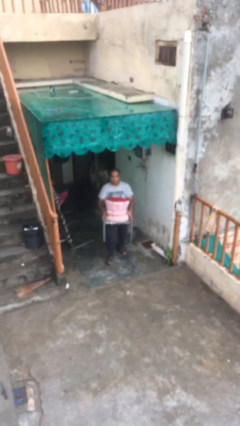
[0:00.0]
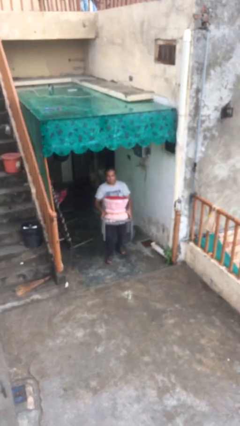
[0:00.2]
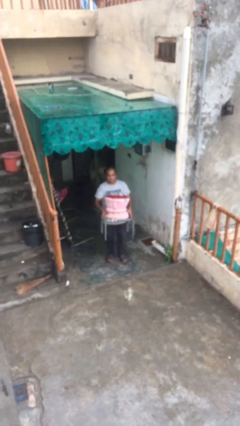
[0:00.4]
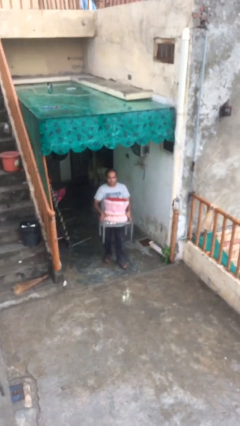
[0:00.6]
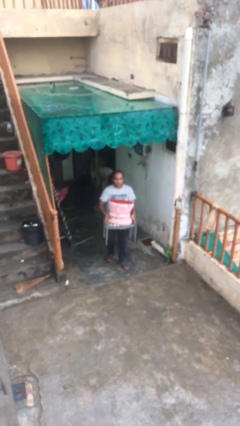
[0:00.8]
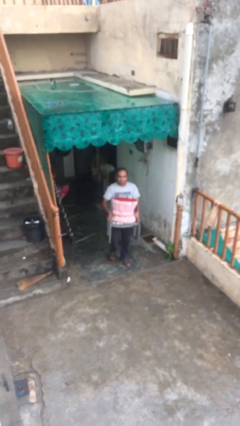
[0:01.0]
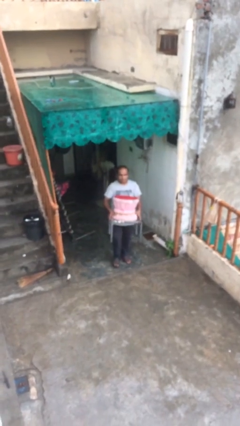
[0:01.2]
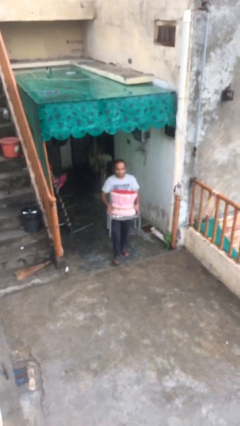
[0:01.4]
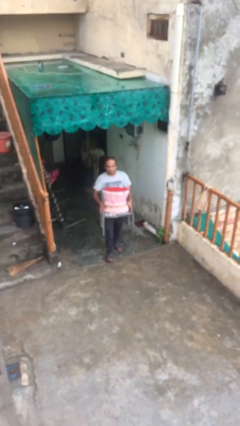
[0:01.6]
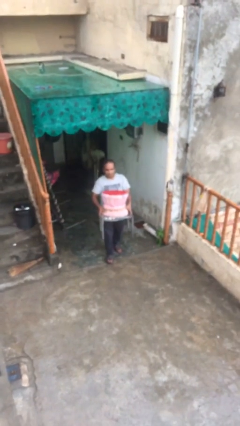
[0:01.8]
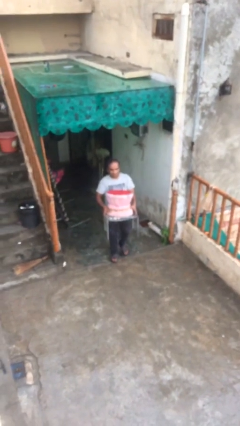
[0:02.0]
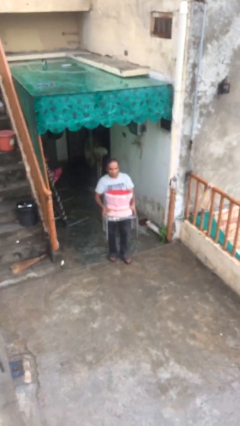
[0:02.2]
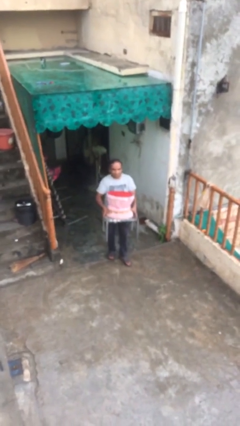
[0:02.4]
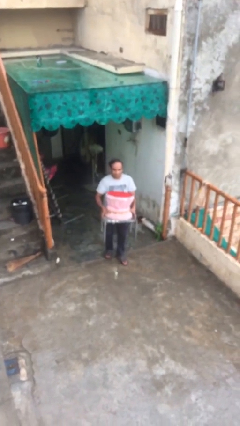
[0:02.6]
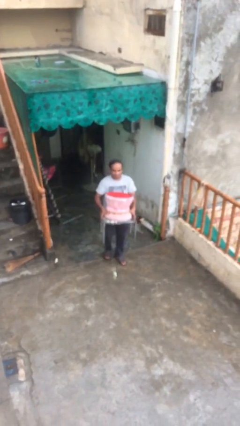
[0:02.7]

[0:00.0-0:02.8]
person carries heavy object

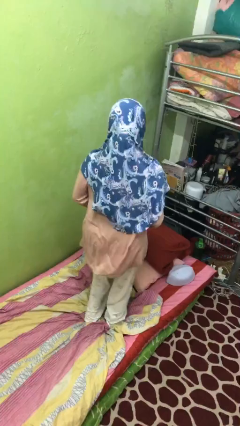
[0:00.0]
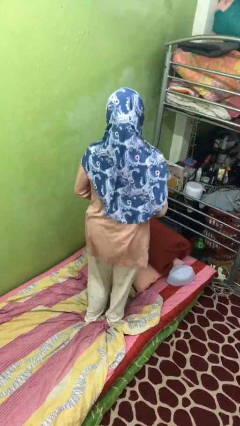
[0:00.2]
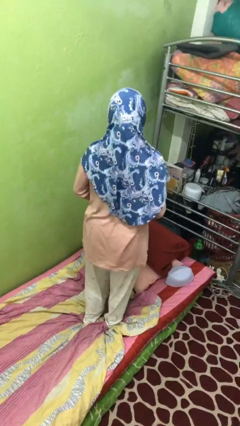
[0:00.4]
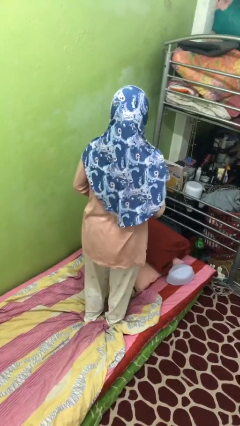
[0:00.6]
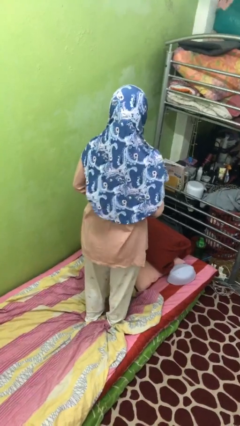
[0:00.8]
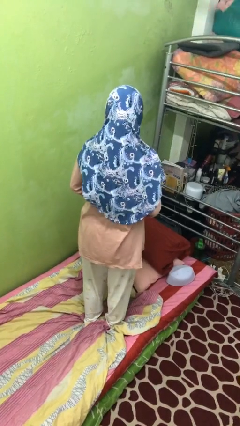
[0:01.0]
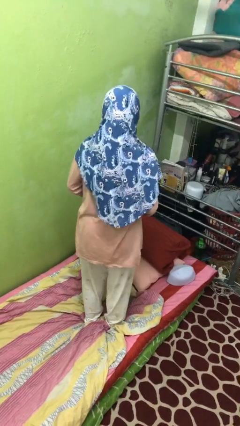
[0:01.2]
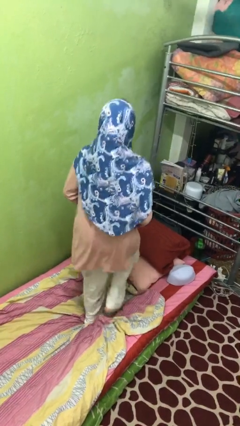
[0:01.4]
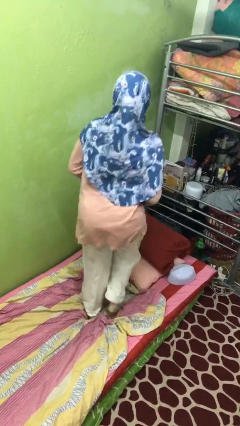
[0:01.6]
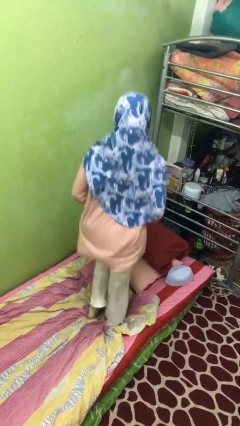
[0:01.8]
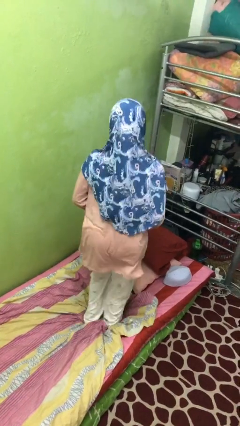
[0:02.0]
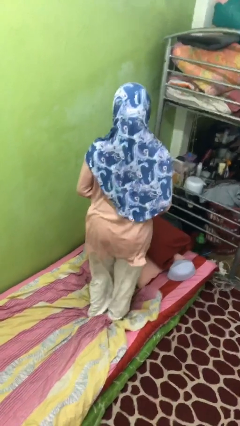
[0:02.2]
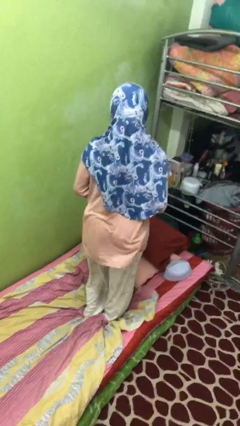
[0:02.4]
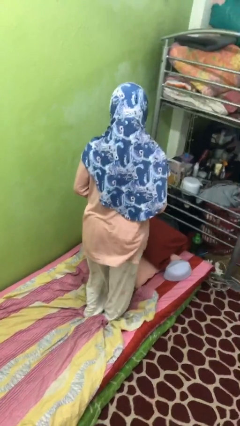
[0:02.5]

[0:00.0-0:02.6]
person jumps on bed

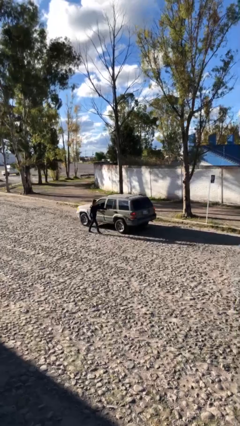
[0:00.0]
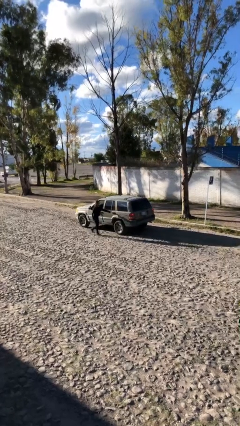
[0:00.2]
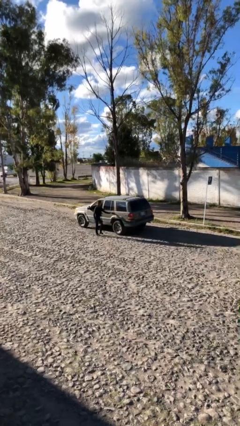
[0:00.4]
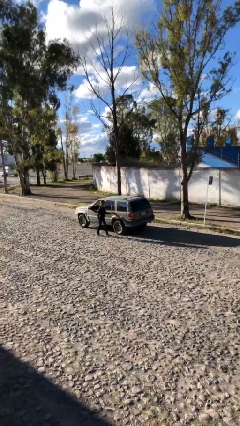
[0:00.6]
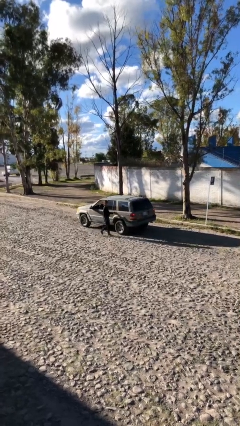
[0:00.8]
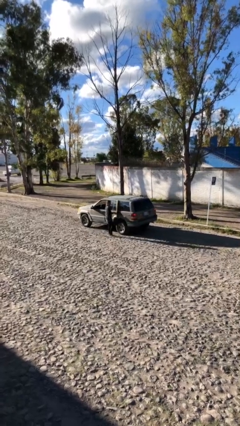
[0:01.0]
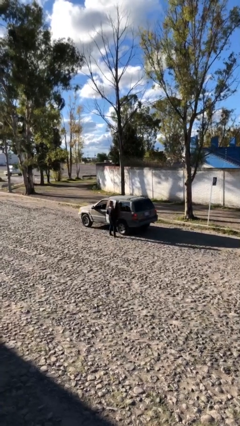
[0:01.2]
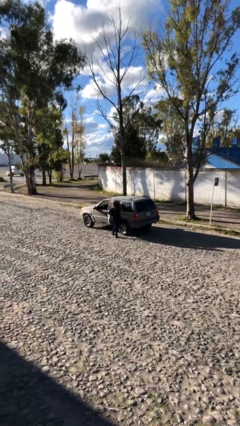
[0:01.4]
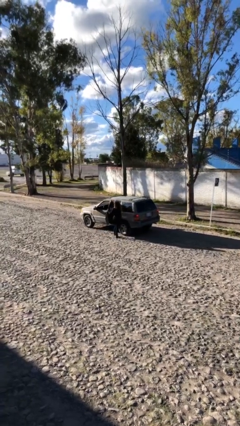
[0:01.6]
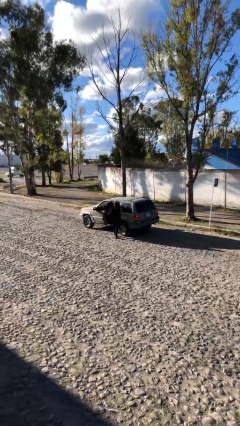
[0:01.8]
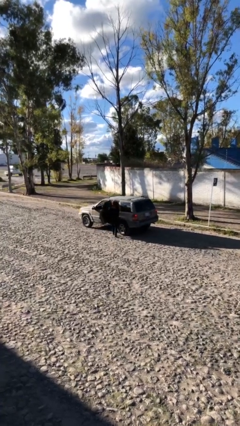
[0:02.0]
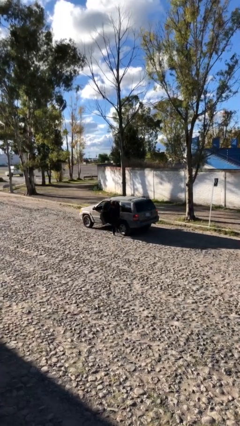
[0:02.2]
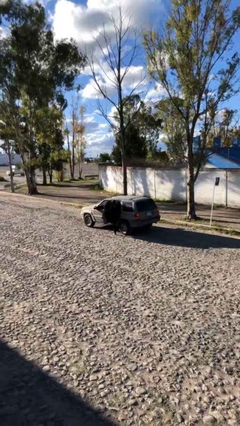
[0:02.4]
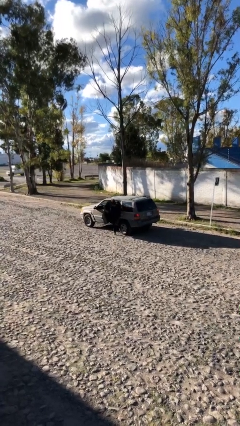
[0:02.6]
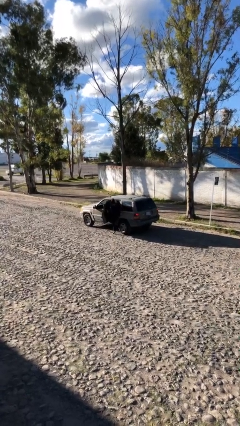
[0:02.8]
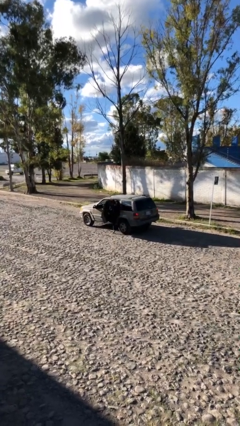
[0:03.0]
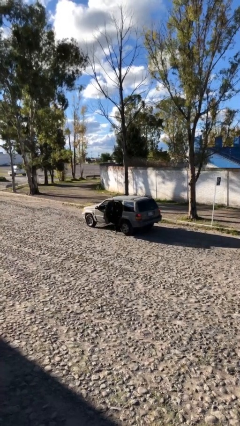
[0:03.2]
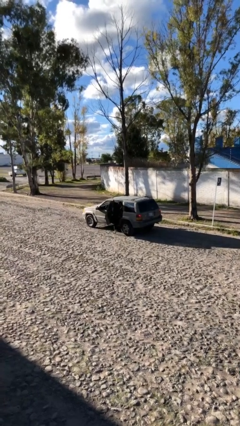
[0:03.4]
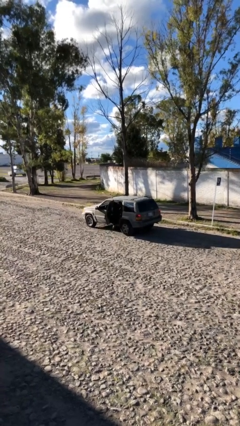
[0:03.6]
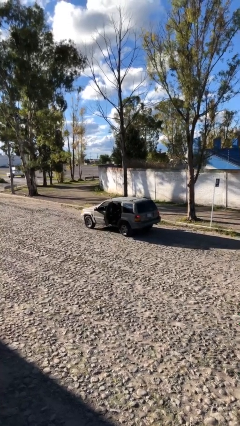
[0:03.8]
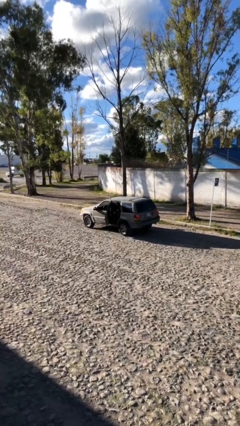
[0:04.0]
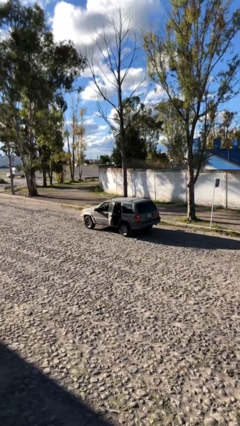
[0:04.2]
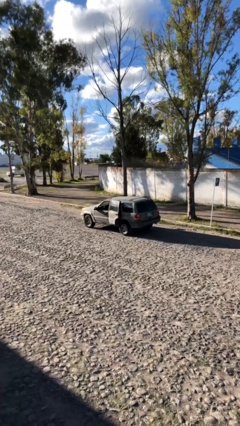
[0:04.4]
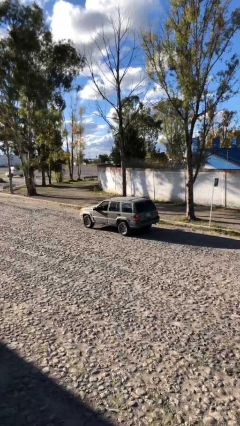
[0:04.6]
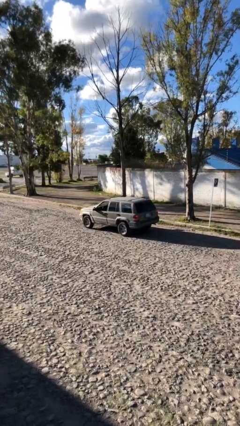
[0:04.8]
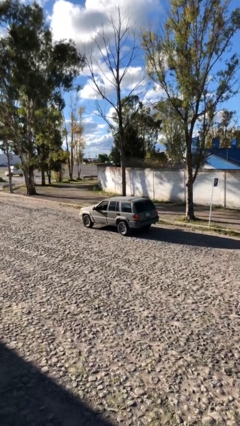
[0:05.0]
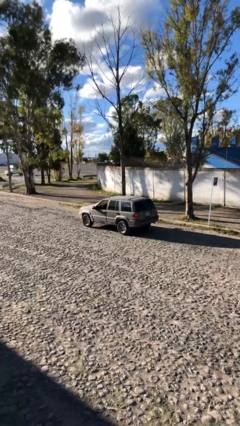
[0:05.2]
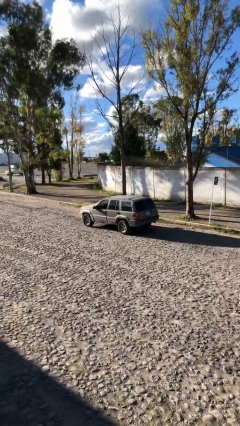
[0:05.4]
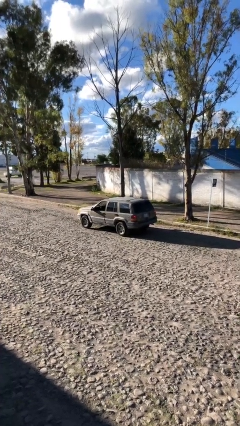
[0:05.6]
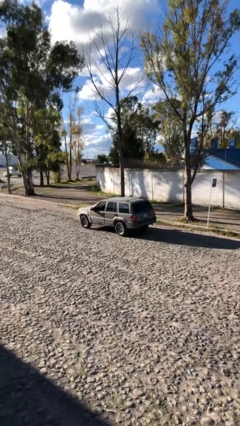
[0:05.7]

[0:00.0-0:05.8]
car picks up person

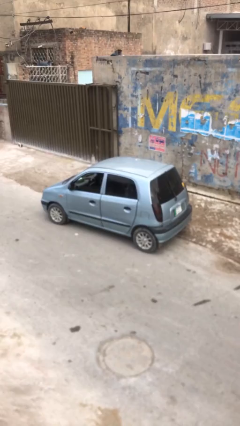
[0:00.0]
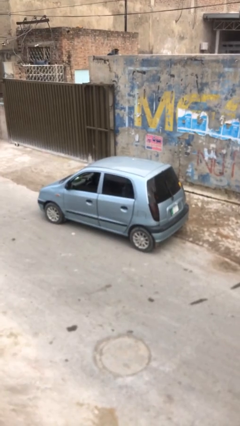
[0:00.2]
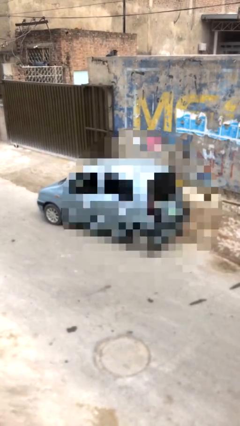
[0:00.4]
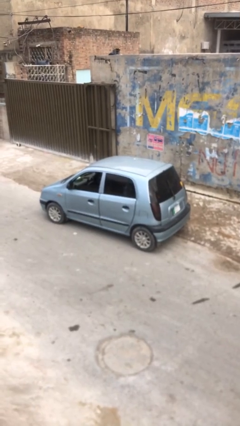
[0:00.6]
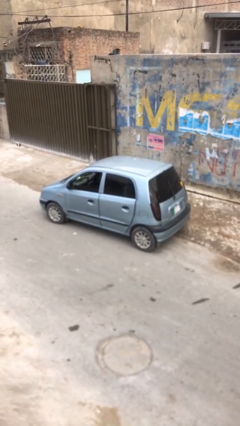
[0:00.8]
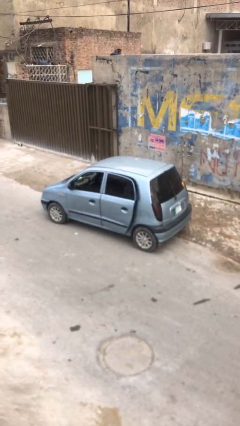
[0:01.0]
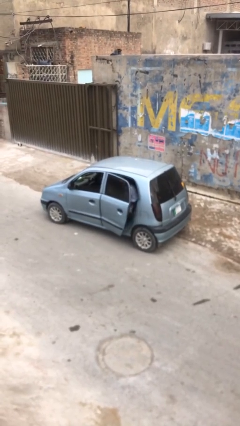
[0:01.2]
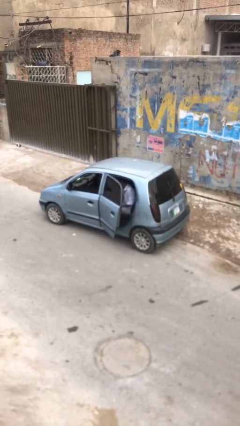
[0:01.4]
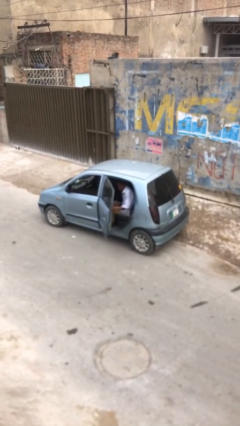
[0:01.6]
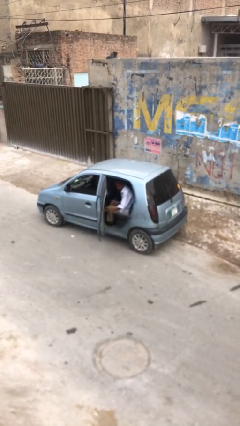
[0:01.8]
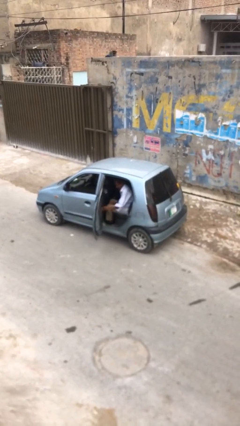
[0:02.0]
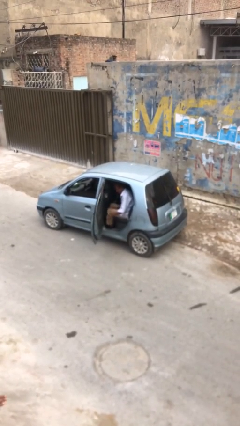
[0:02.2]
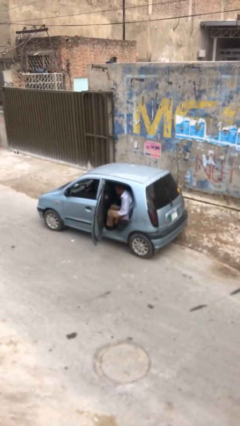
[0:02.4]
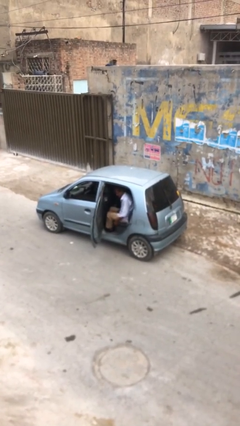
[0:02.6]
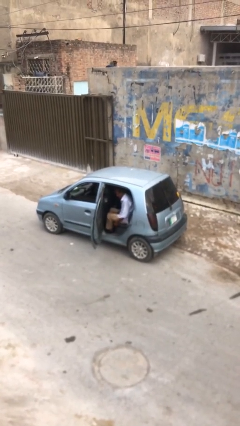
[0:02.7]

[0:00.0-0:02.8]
person opens car door

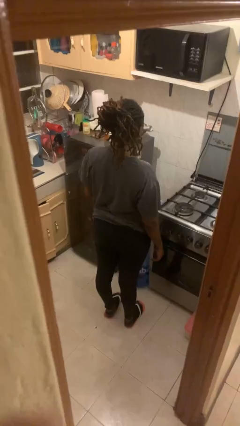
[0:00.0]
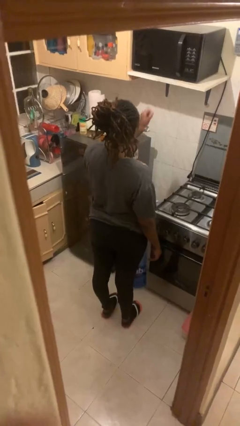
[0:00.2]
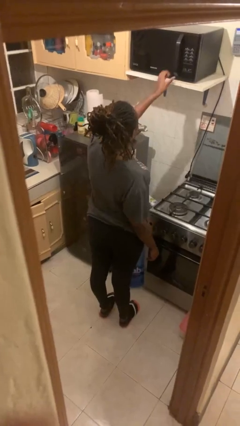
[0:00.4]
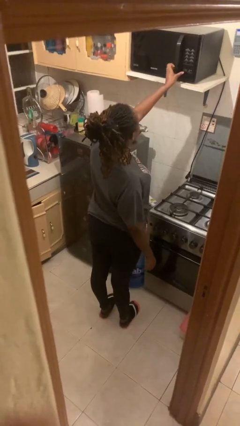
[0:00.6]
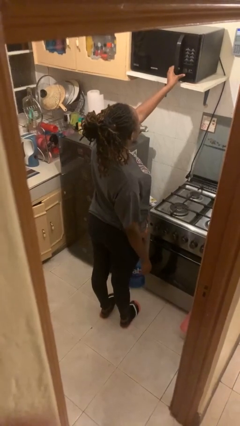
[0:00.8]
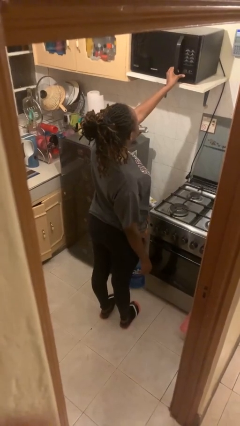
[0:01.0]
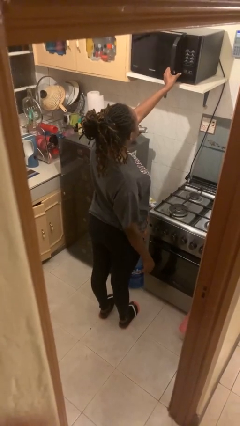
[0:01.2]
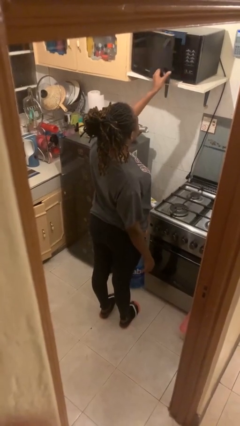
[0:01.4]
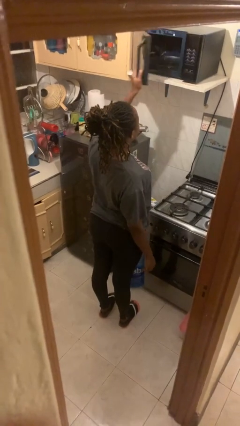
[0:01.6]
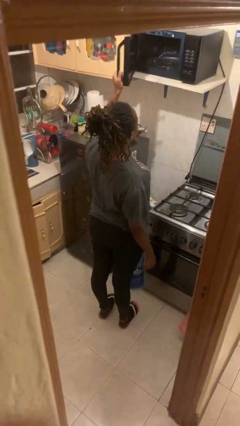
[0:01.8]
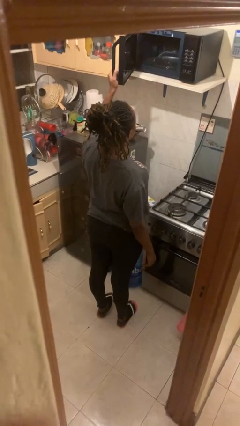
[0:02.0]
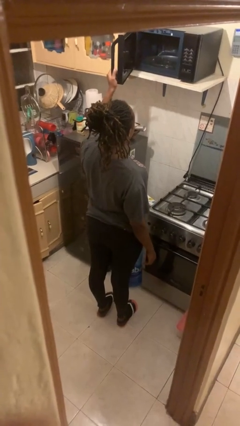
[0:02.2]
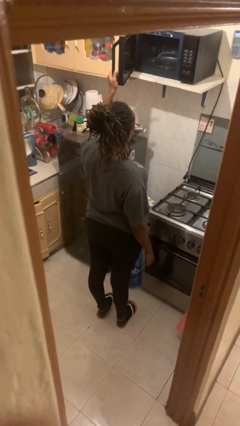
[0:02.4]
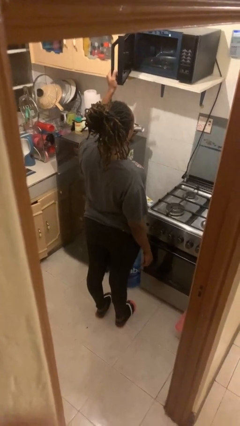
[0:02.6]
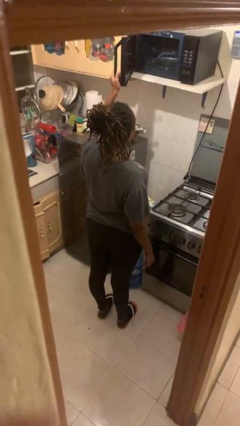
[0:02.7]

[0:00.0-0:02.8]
person opens microwave

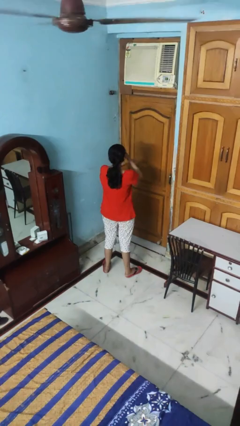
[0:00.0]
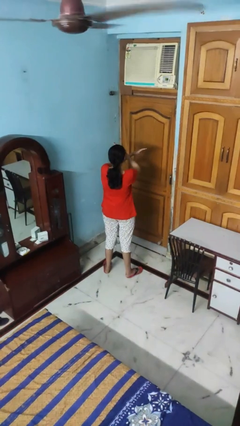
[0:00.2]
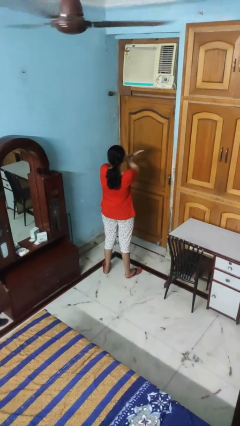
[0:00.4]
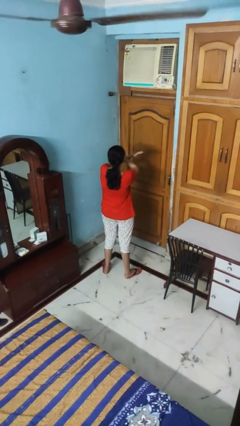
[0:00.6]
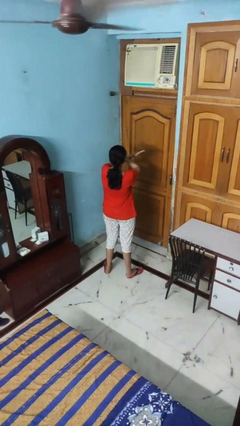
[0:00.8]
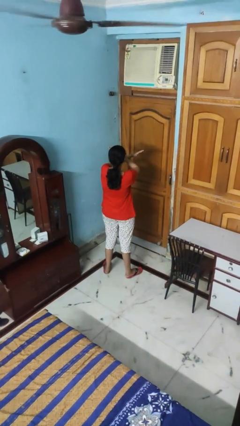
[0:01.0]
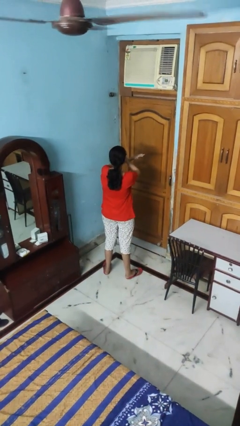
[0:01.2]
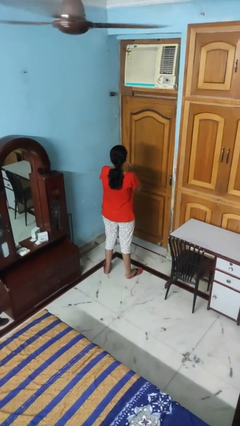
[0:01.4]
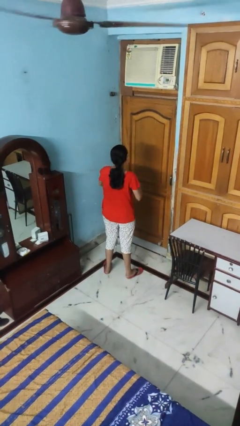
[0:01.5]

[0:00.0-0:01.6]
person gestures arms x
